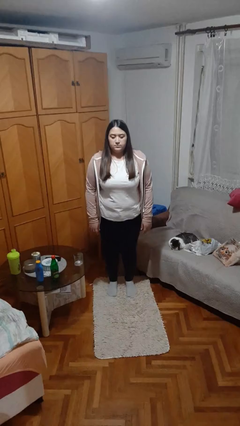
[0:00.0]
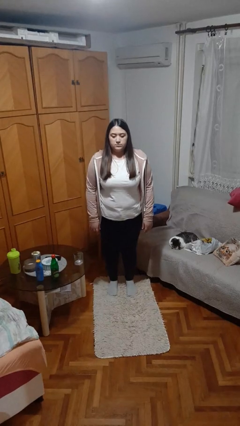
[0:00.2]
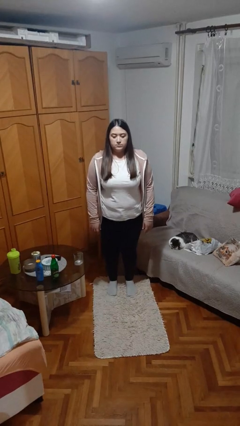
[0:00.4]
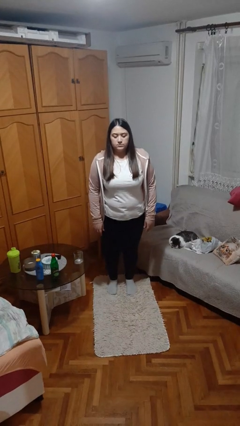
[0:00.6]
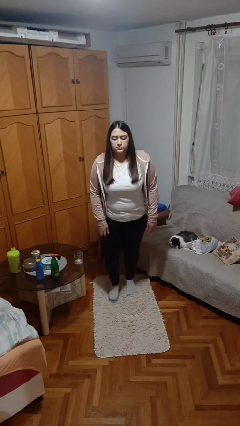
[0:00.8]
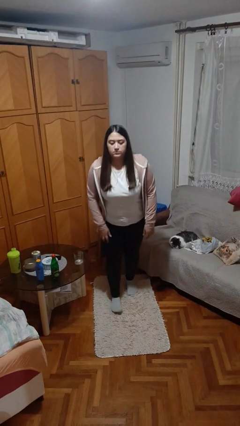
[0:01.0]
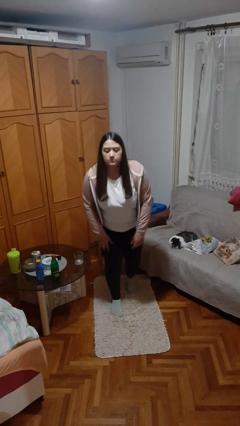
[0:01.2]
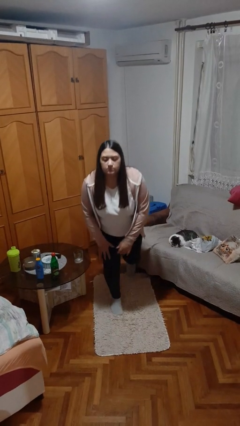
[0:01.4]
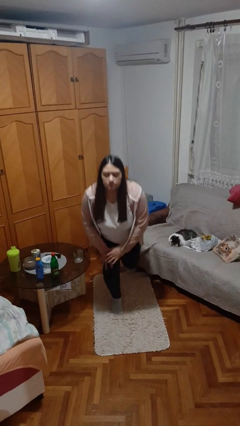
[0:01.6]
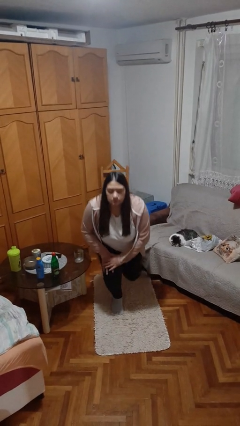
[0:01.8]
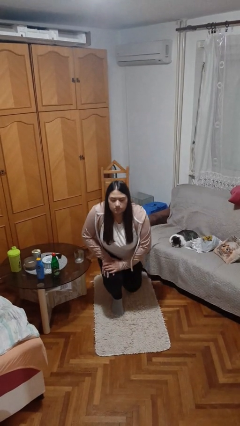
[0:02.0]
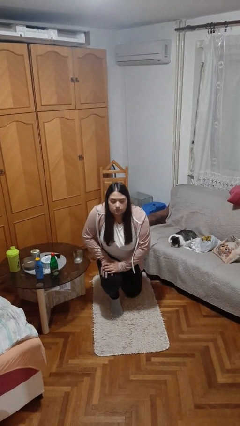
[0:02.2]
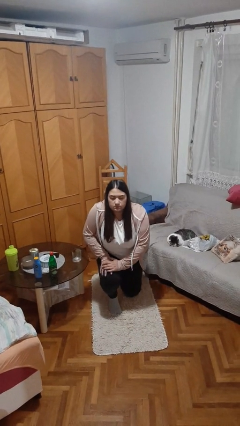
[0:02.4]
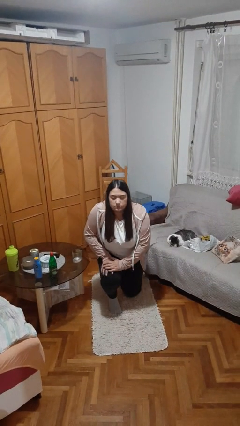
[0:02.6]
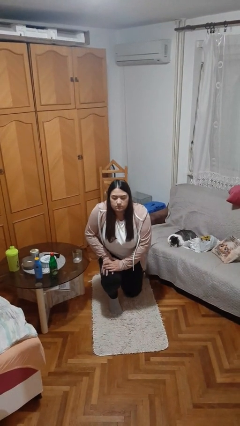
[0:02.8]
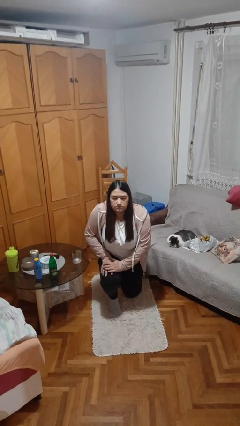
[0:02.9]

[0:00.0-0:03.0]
person kneels

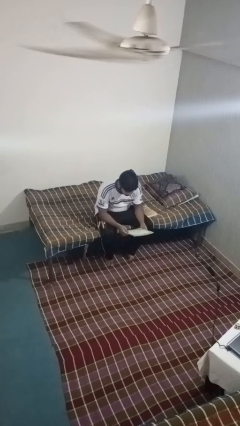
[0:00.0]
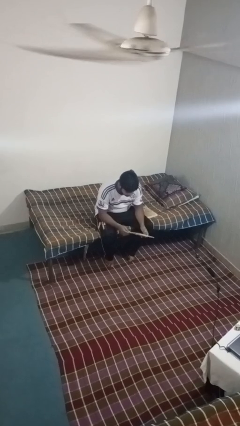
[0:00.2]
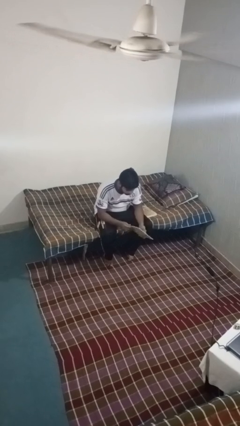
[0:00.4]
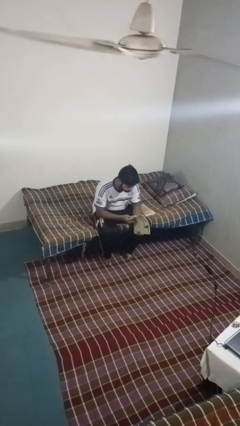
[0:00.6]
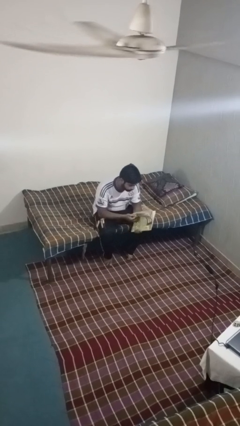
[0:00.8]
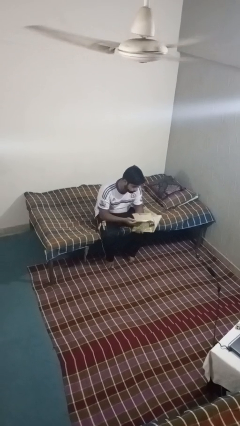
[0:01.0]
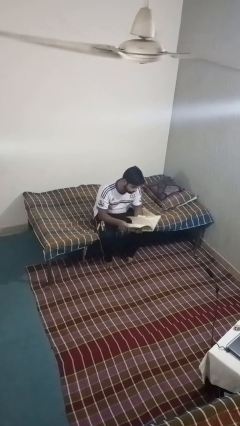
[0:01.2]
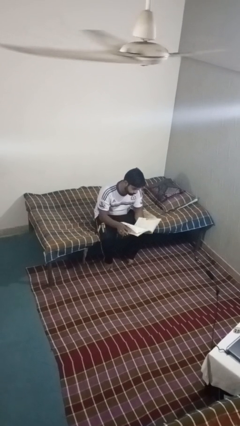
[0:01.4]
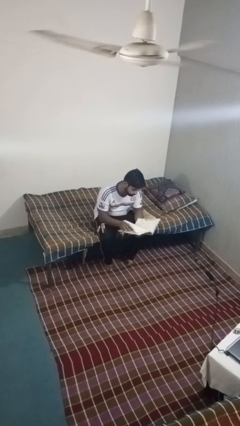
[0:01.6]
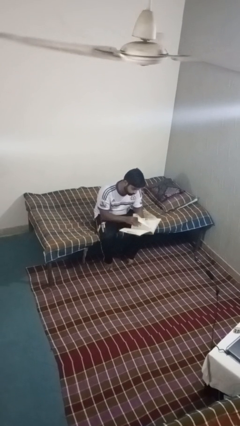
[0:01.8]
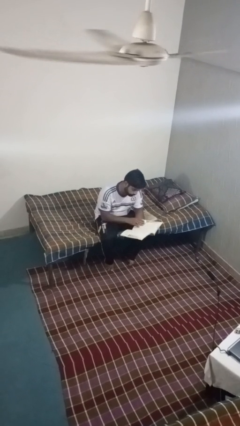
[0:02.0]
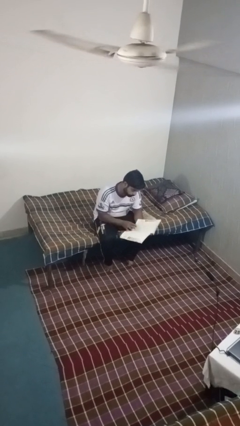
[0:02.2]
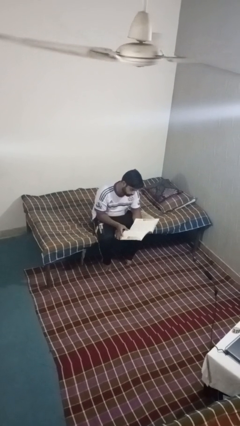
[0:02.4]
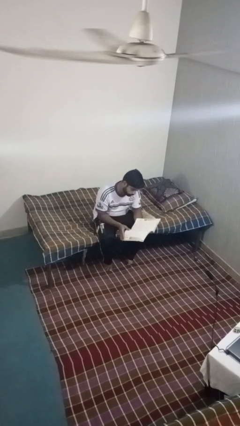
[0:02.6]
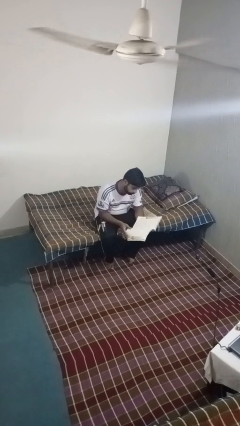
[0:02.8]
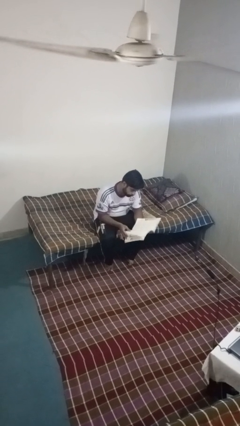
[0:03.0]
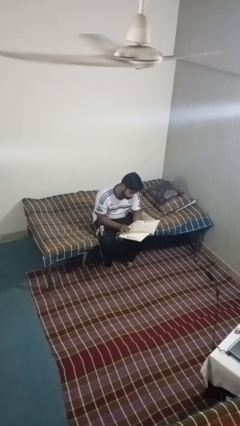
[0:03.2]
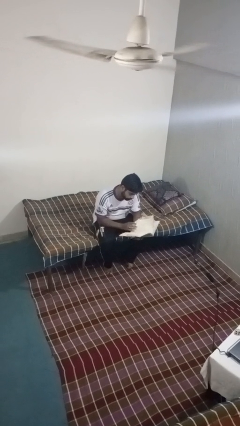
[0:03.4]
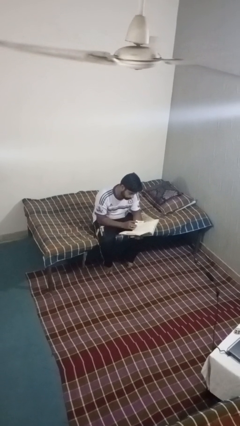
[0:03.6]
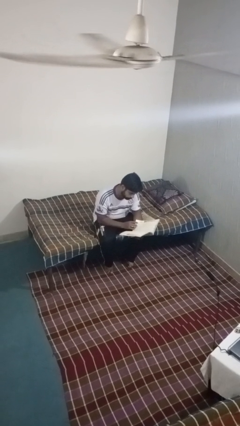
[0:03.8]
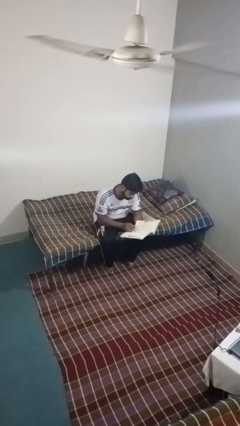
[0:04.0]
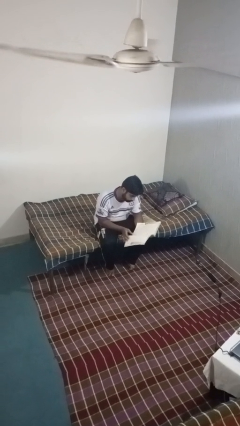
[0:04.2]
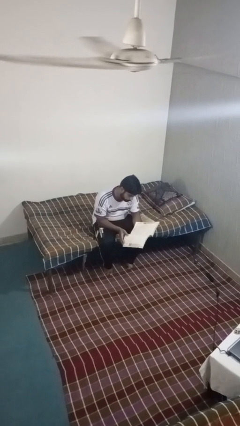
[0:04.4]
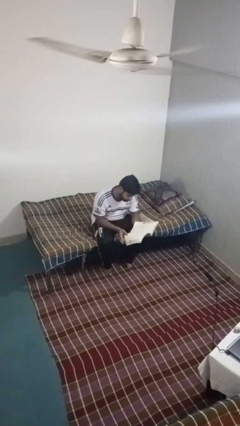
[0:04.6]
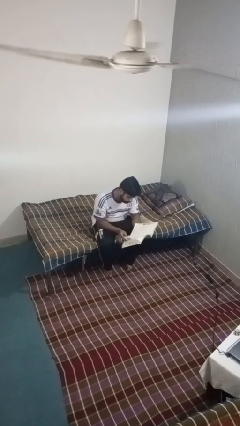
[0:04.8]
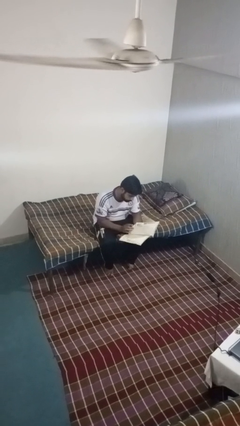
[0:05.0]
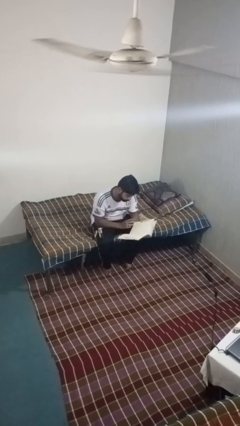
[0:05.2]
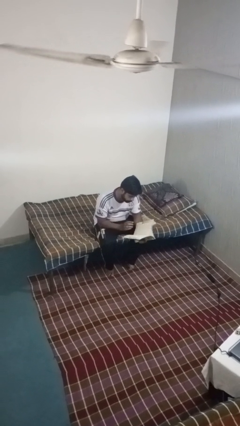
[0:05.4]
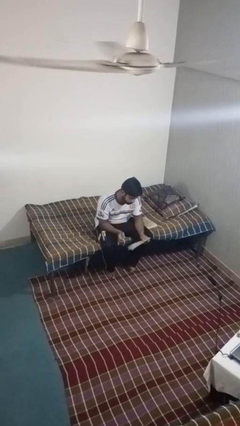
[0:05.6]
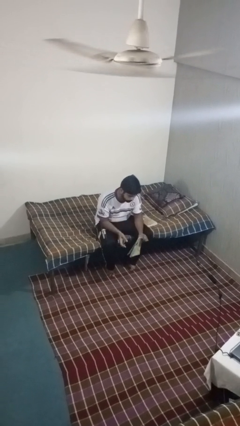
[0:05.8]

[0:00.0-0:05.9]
person reads magazine

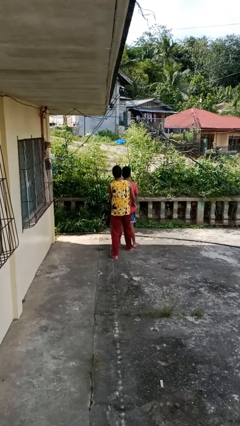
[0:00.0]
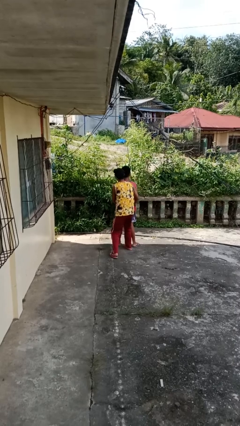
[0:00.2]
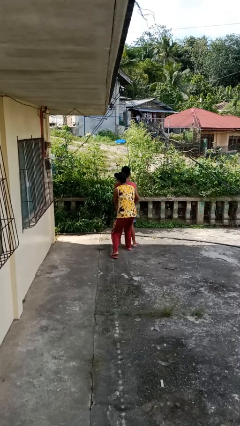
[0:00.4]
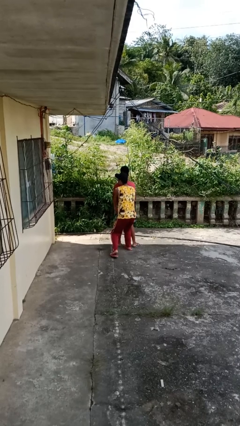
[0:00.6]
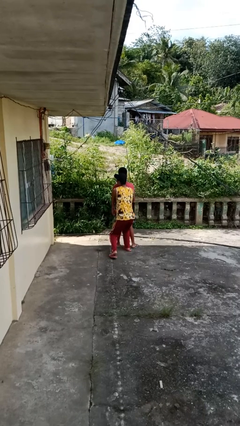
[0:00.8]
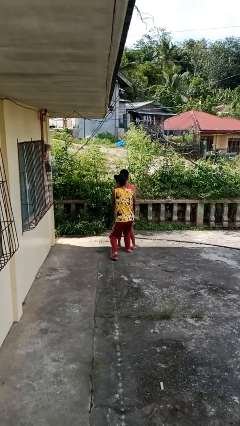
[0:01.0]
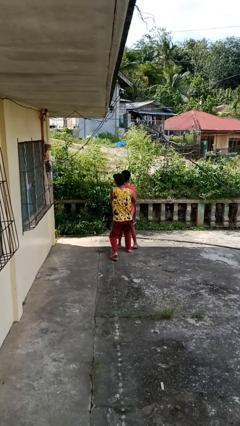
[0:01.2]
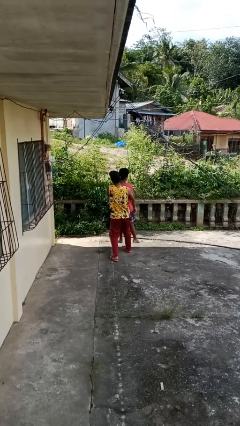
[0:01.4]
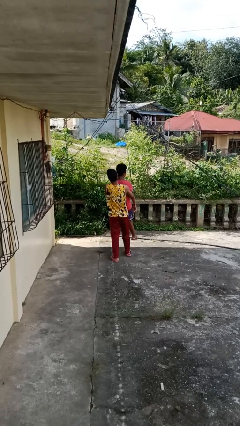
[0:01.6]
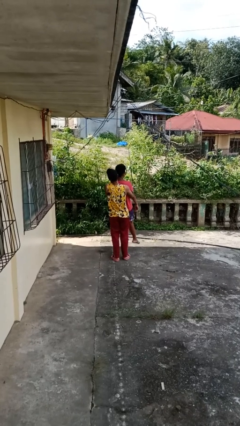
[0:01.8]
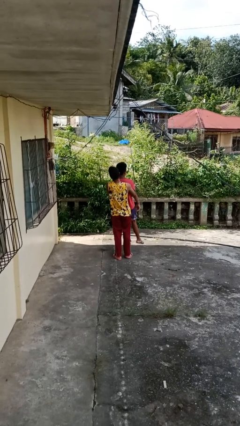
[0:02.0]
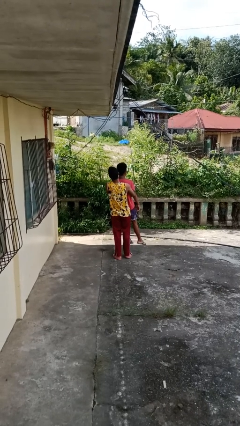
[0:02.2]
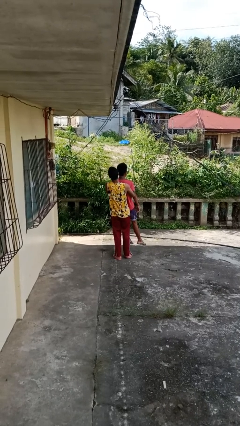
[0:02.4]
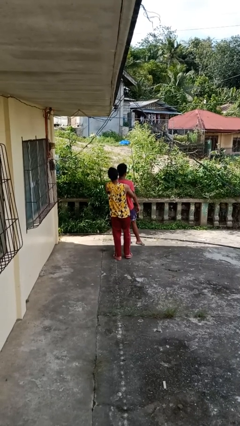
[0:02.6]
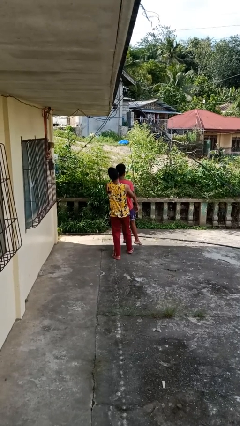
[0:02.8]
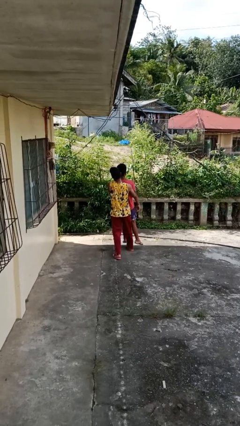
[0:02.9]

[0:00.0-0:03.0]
person picks up person

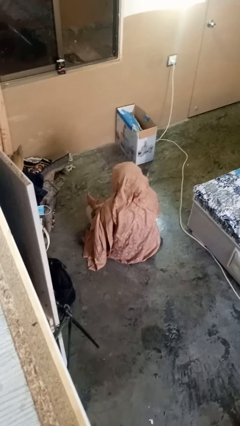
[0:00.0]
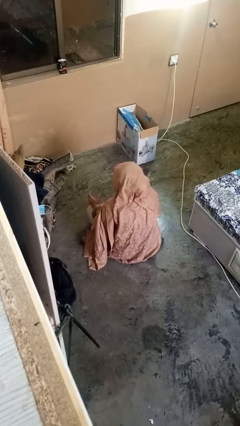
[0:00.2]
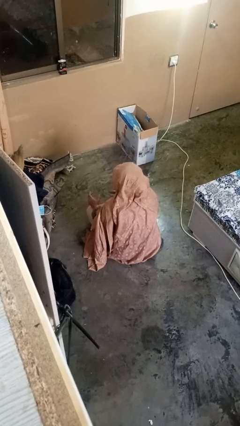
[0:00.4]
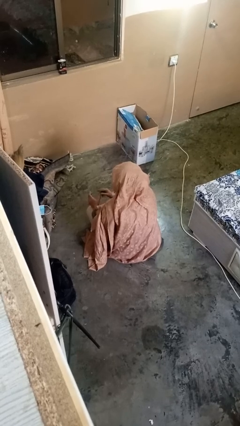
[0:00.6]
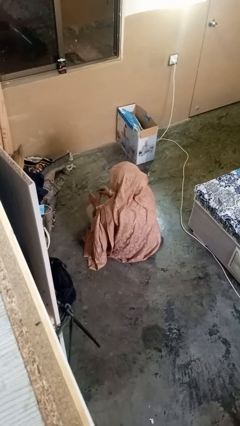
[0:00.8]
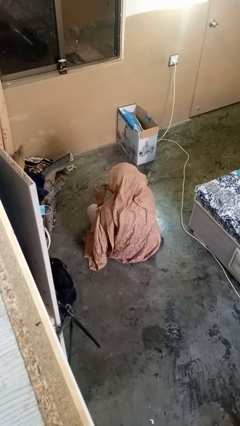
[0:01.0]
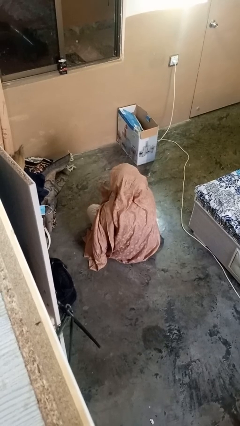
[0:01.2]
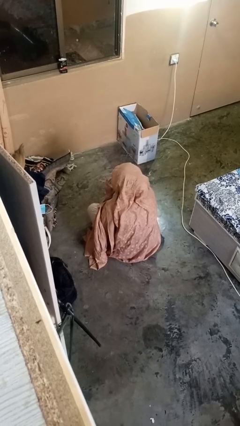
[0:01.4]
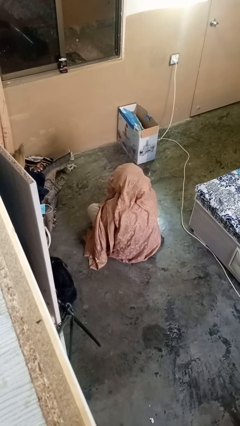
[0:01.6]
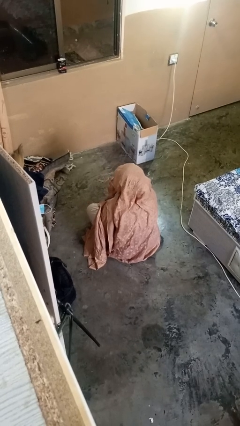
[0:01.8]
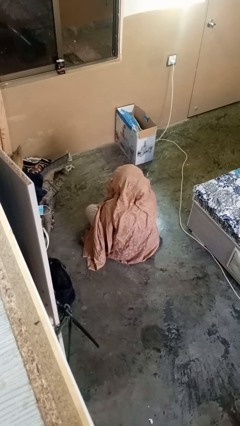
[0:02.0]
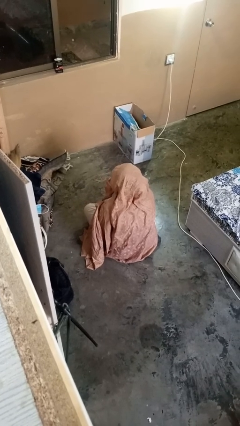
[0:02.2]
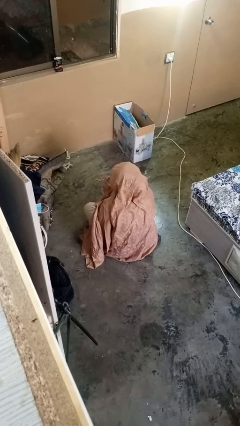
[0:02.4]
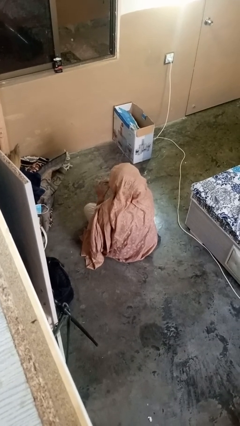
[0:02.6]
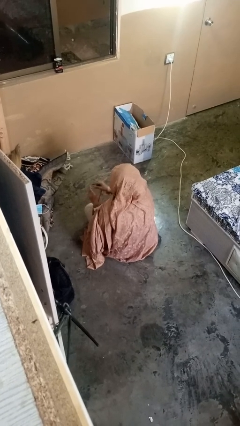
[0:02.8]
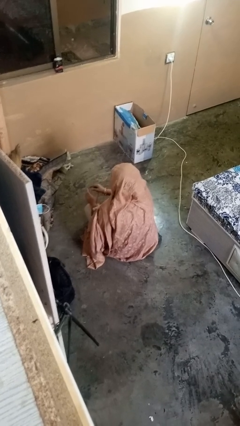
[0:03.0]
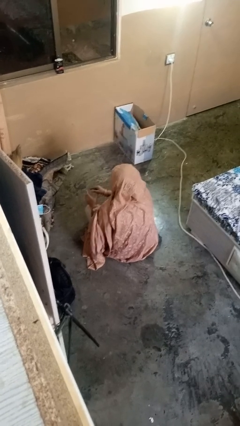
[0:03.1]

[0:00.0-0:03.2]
person drinks from straw

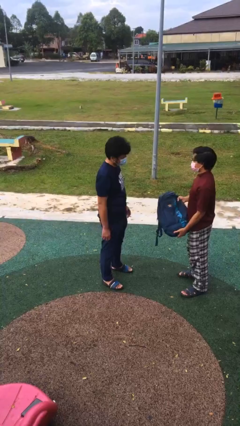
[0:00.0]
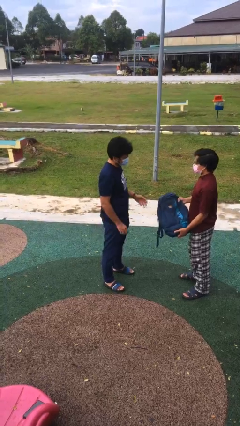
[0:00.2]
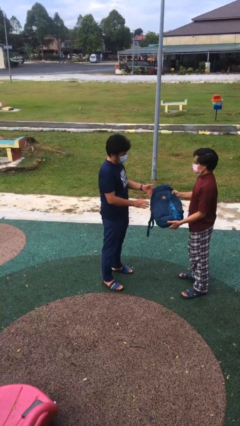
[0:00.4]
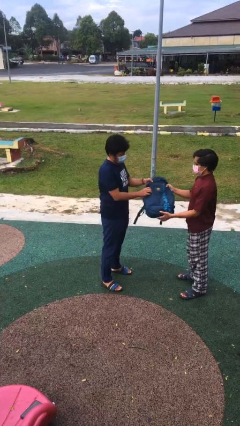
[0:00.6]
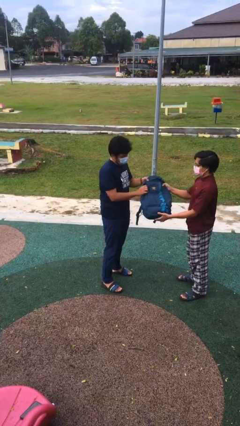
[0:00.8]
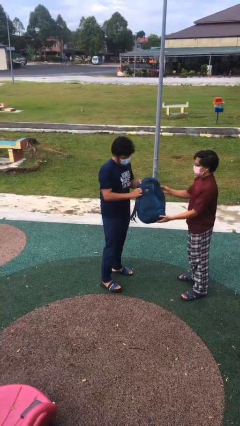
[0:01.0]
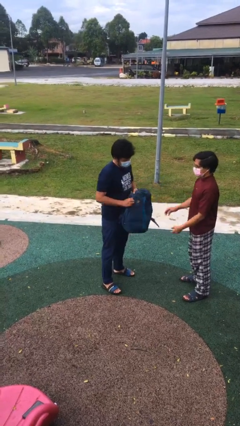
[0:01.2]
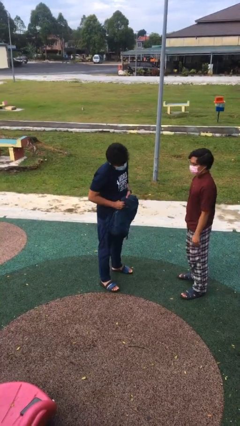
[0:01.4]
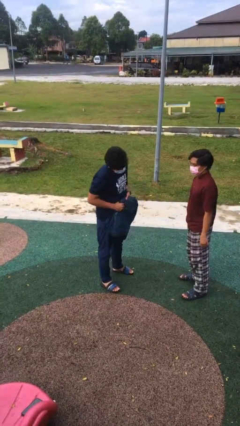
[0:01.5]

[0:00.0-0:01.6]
person transfers object to person

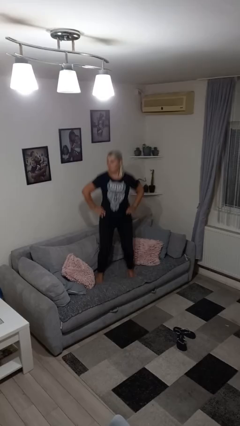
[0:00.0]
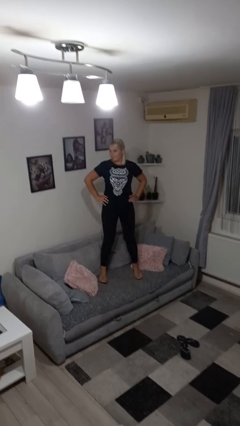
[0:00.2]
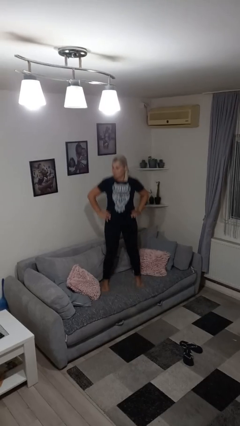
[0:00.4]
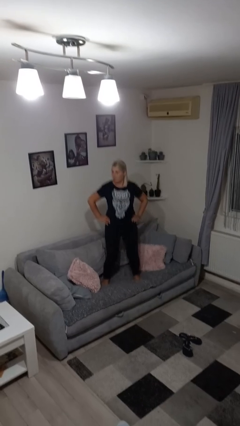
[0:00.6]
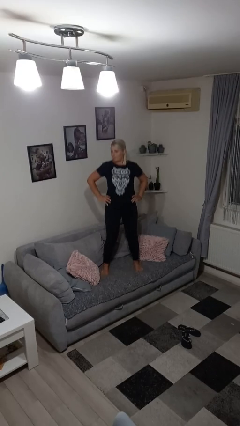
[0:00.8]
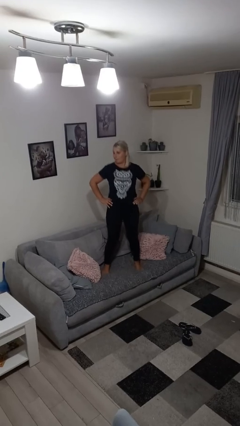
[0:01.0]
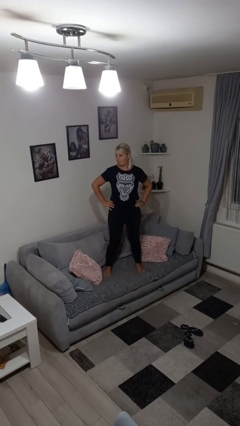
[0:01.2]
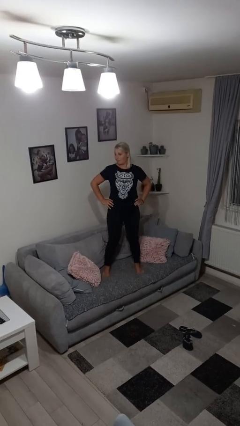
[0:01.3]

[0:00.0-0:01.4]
person jumps on couch
